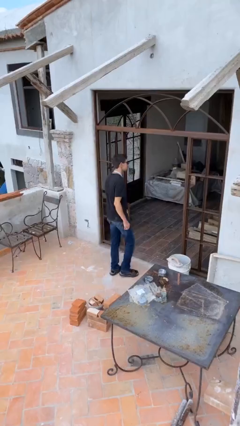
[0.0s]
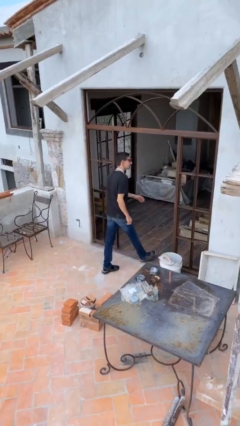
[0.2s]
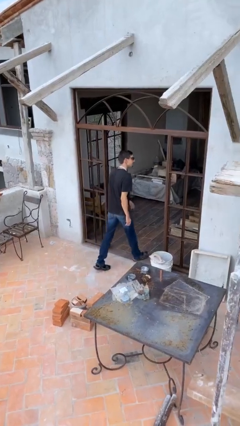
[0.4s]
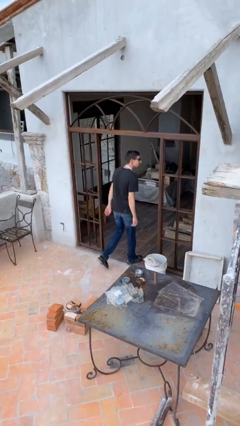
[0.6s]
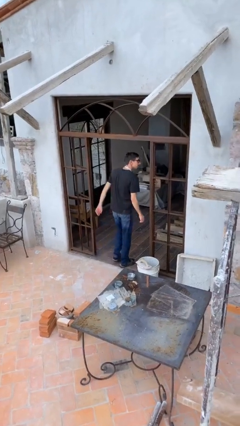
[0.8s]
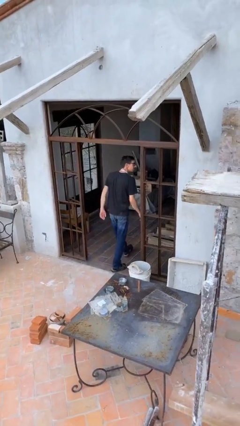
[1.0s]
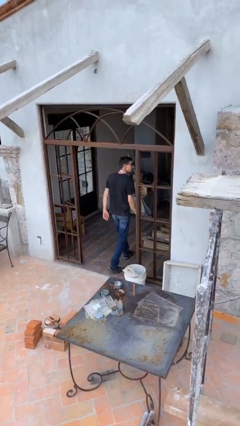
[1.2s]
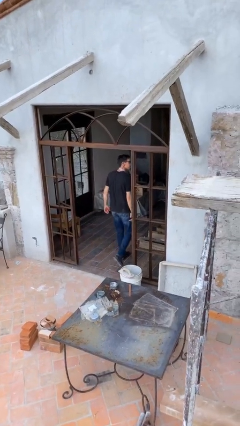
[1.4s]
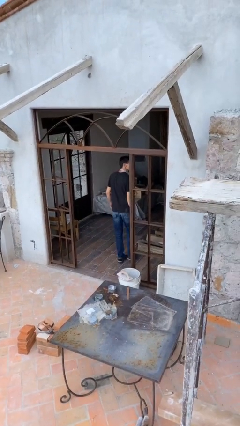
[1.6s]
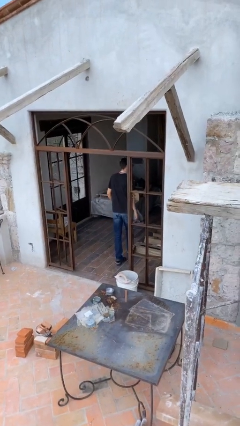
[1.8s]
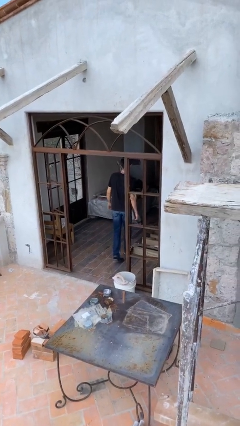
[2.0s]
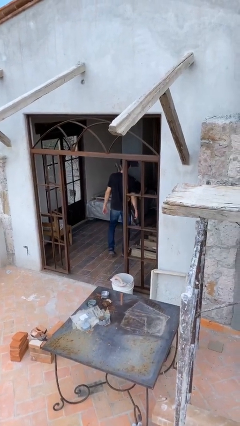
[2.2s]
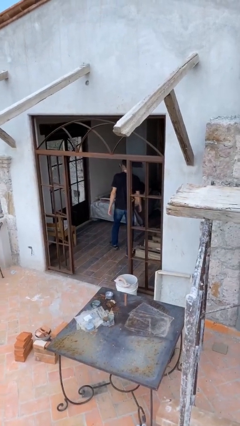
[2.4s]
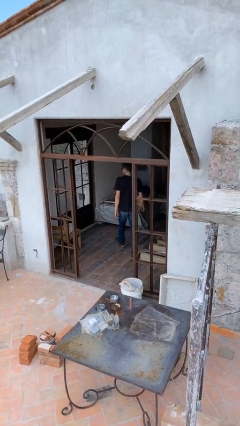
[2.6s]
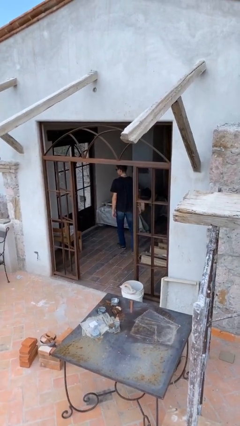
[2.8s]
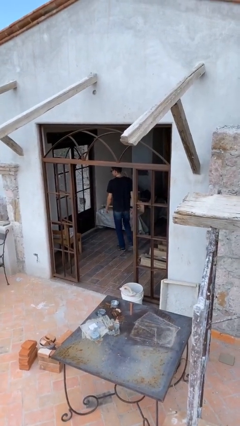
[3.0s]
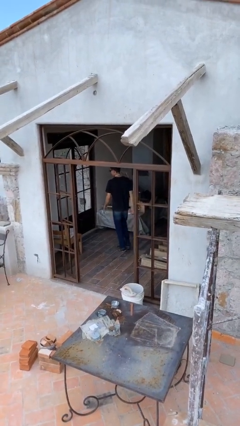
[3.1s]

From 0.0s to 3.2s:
person exits scene through structure

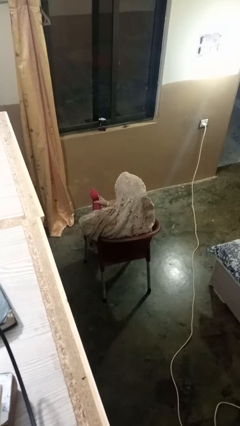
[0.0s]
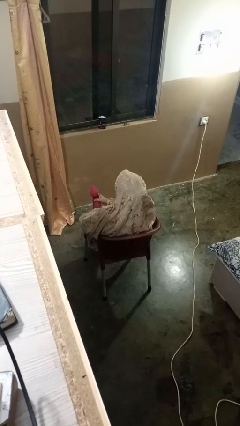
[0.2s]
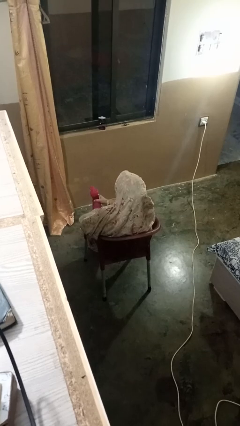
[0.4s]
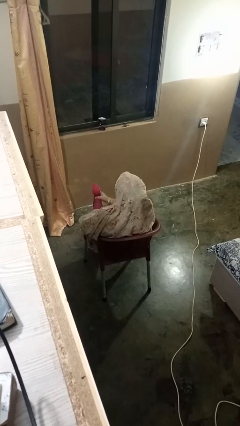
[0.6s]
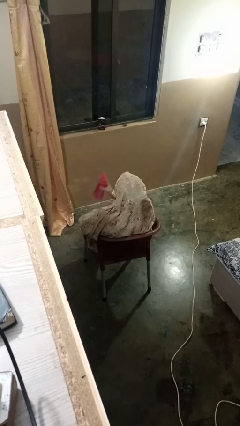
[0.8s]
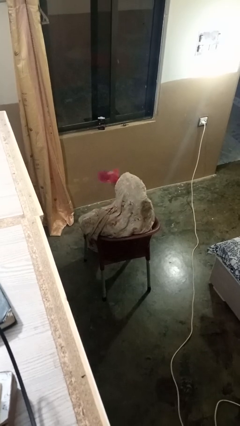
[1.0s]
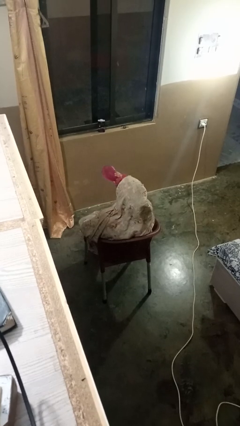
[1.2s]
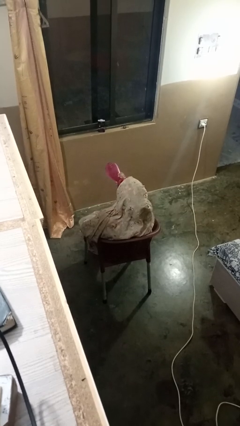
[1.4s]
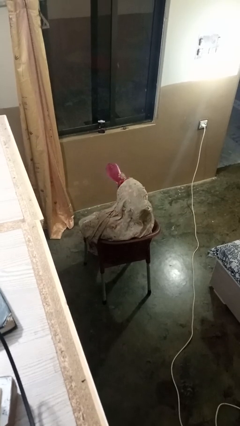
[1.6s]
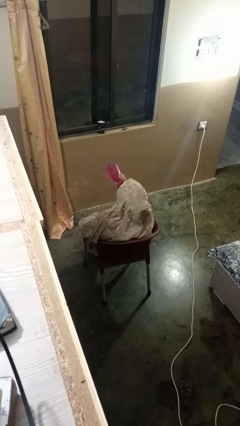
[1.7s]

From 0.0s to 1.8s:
person drinks from bottle

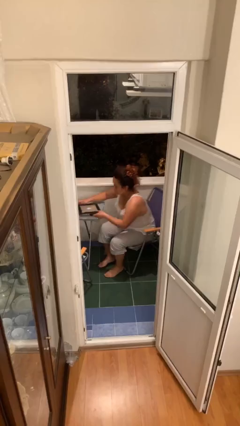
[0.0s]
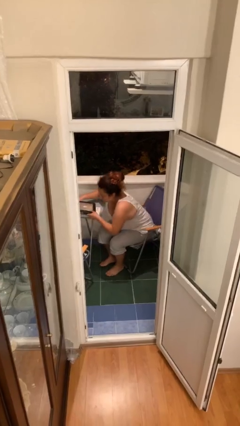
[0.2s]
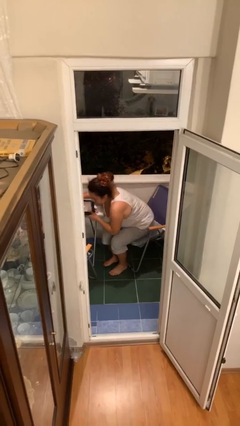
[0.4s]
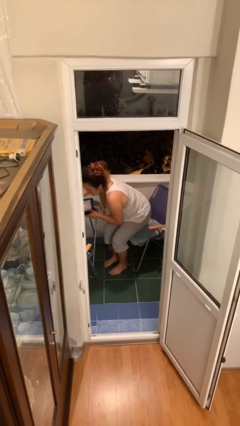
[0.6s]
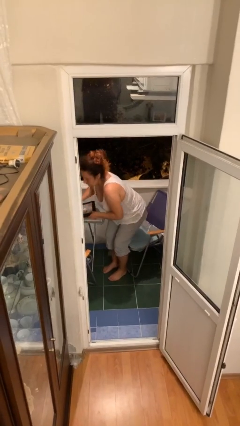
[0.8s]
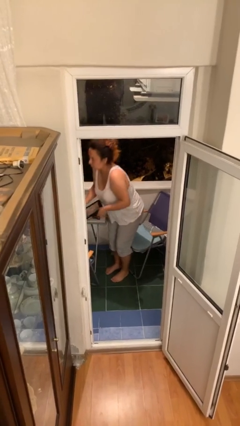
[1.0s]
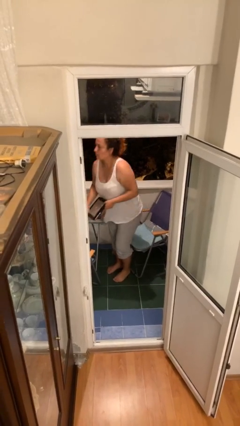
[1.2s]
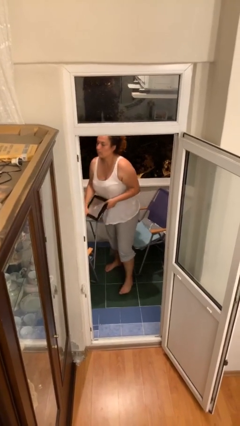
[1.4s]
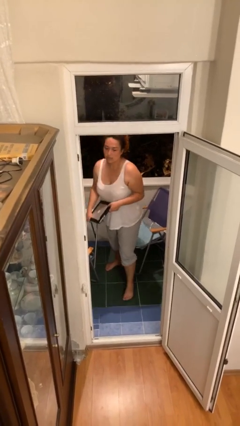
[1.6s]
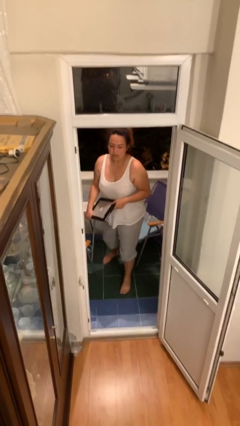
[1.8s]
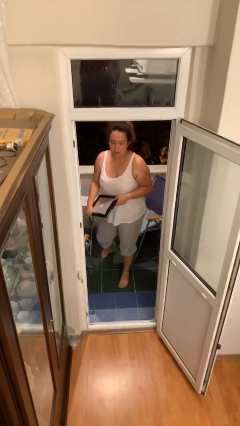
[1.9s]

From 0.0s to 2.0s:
person stands up

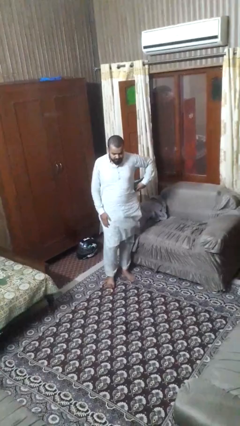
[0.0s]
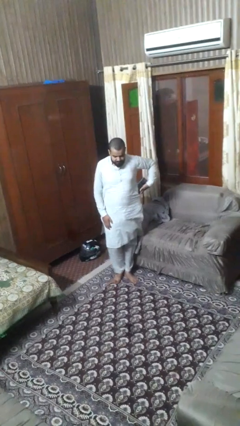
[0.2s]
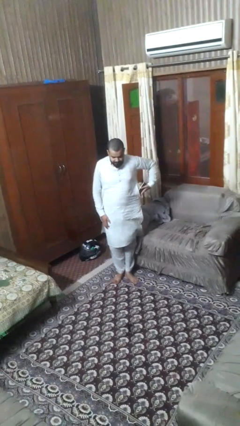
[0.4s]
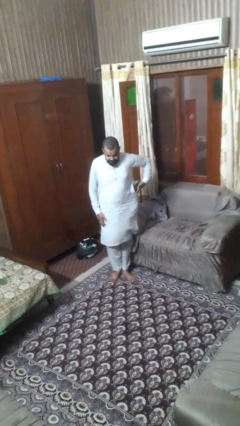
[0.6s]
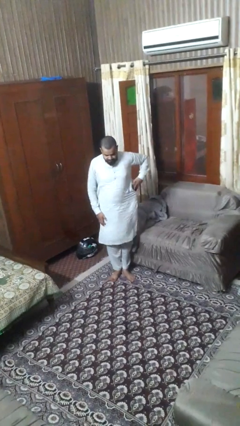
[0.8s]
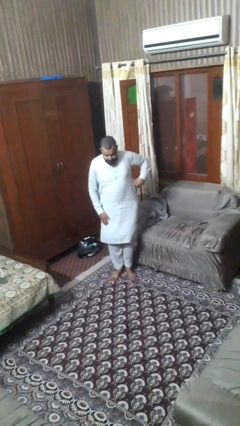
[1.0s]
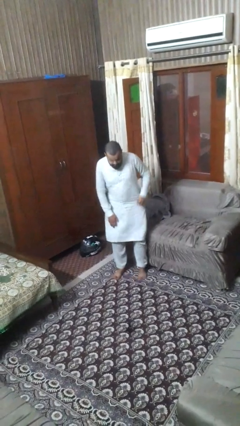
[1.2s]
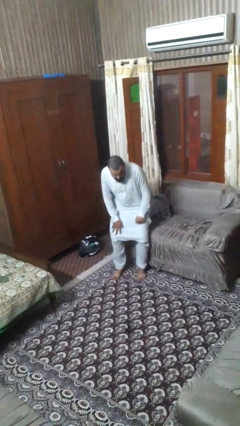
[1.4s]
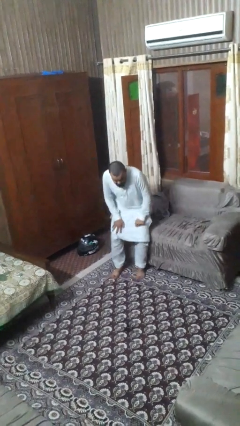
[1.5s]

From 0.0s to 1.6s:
person puts phone into pocket

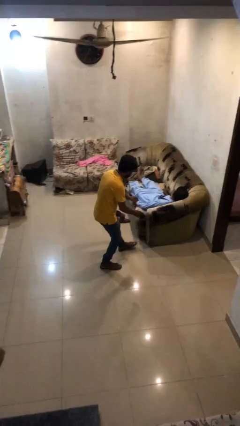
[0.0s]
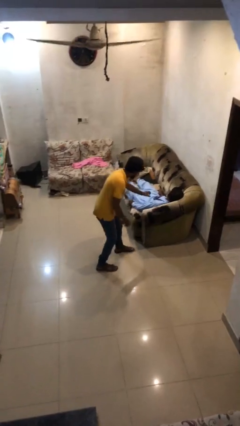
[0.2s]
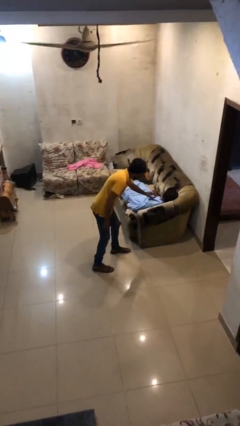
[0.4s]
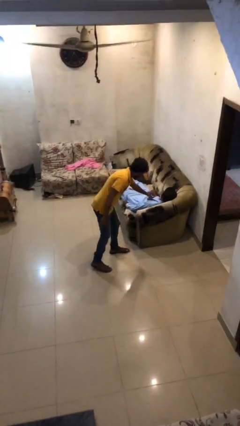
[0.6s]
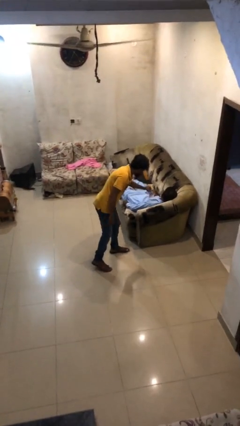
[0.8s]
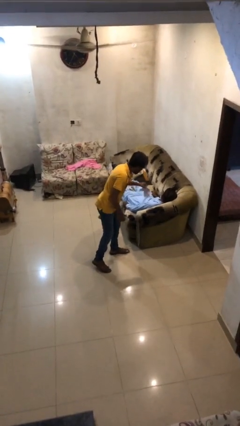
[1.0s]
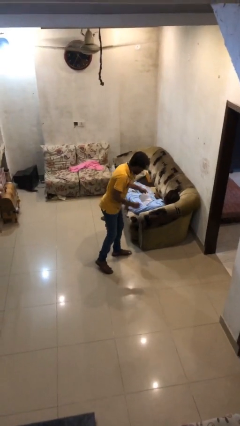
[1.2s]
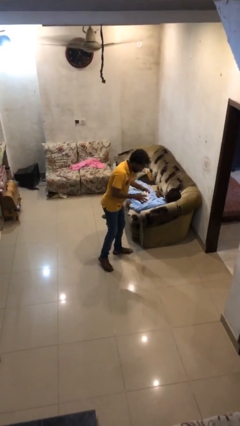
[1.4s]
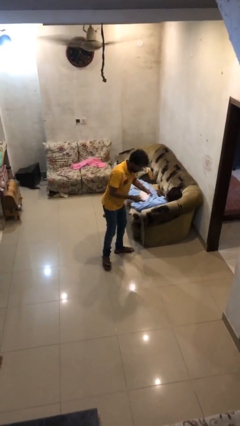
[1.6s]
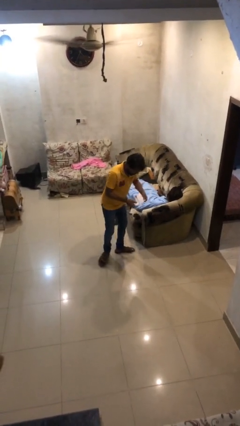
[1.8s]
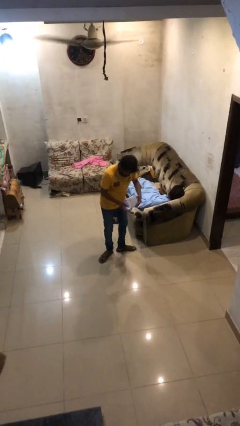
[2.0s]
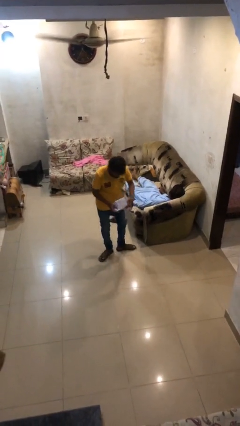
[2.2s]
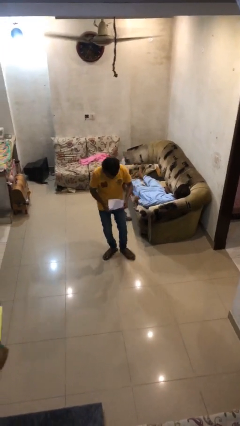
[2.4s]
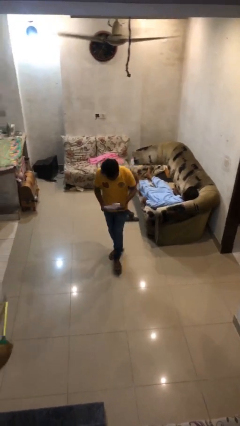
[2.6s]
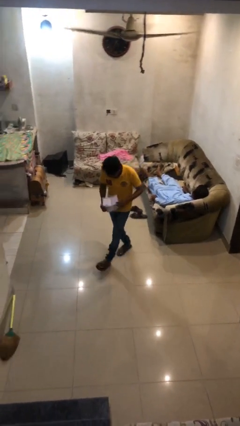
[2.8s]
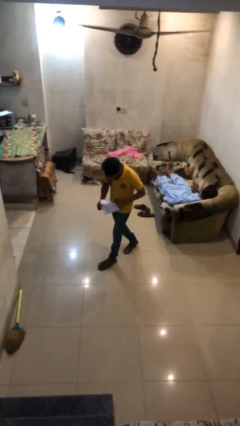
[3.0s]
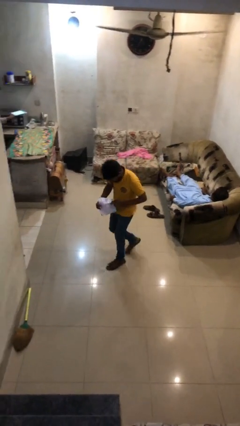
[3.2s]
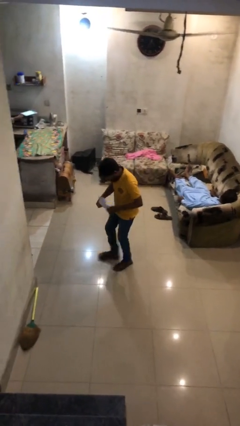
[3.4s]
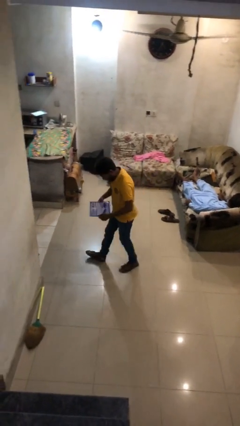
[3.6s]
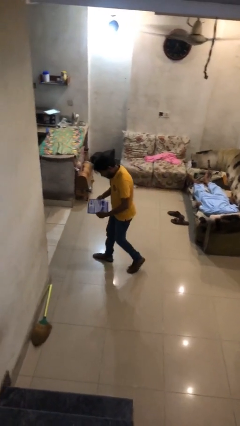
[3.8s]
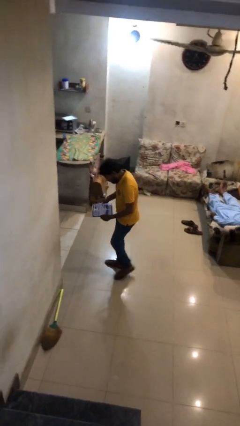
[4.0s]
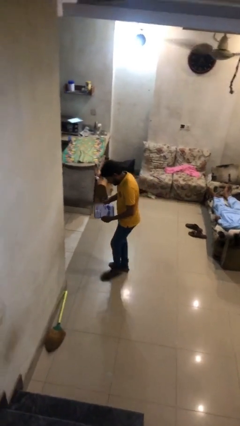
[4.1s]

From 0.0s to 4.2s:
person steals object from person

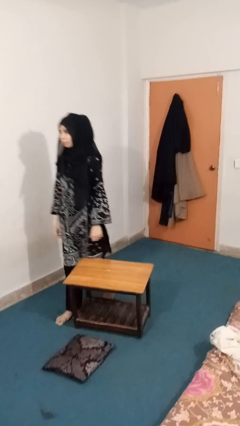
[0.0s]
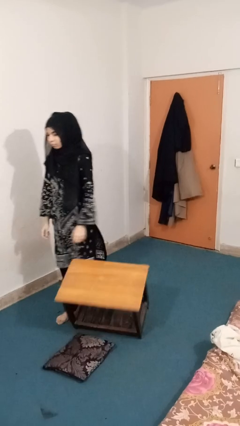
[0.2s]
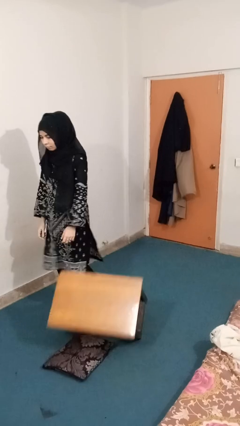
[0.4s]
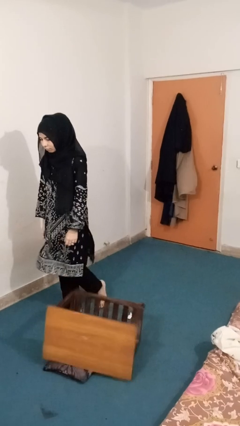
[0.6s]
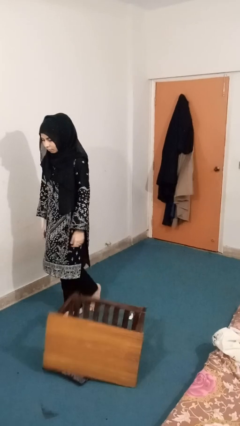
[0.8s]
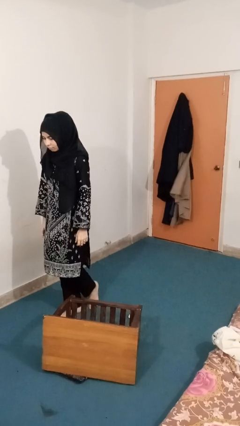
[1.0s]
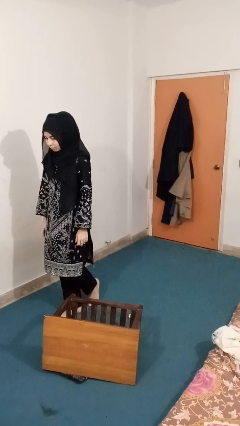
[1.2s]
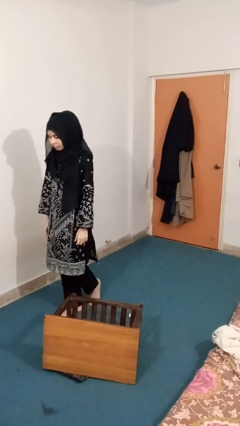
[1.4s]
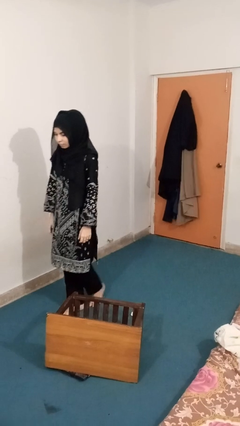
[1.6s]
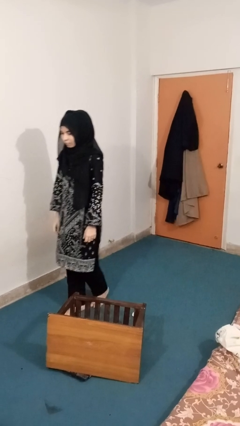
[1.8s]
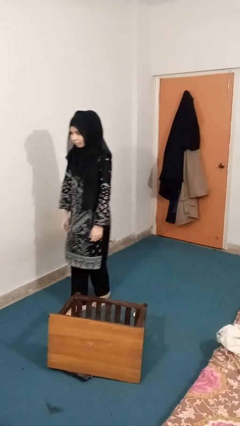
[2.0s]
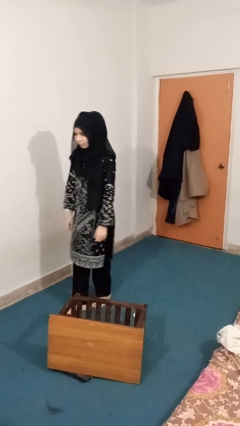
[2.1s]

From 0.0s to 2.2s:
person knocks over furniture

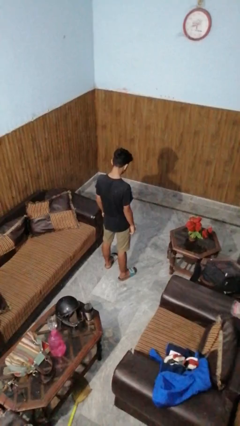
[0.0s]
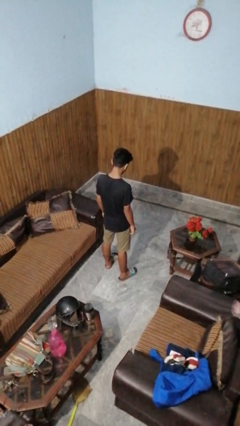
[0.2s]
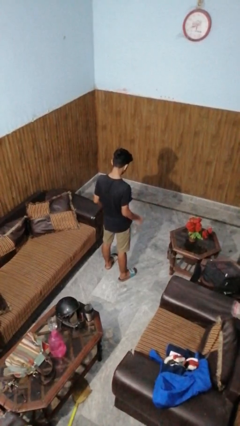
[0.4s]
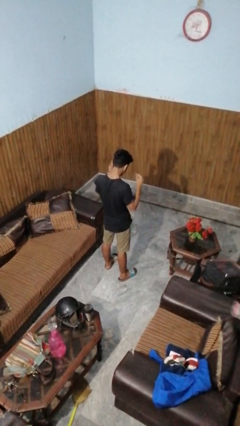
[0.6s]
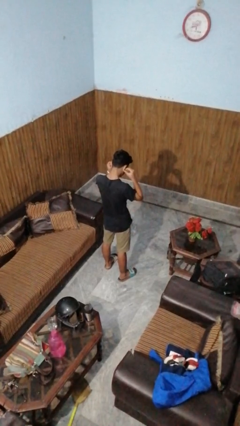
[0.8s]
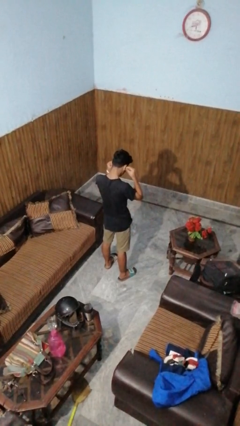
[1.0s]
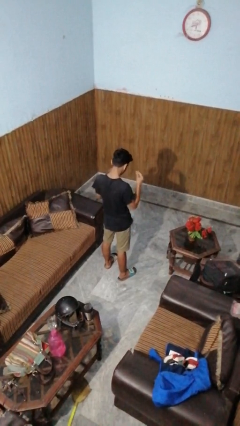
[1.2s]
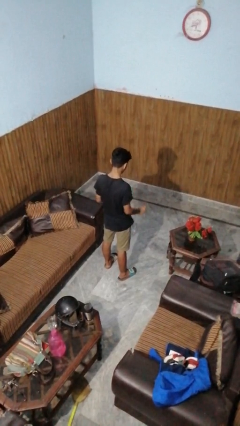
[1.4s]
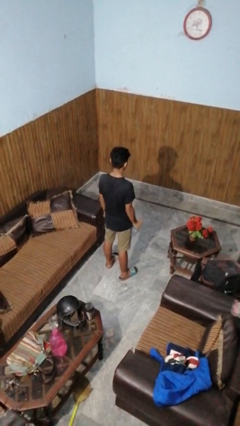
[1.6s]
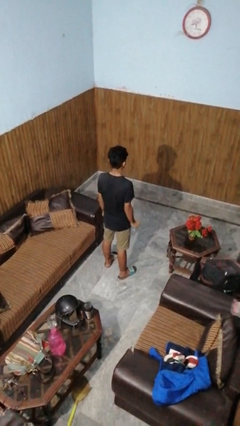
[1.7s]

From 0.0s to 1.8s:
person takes off headphones
